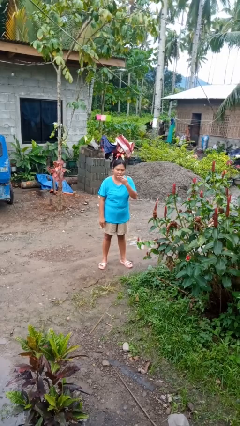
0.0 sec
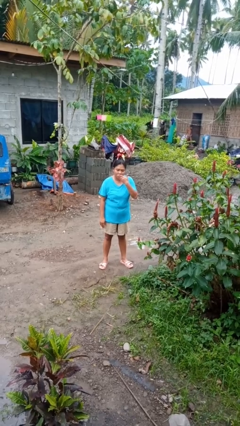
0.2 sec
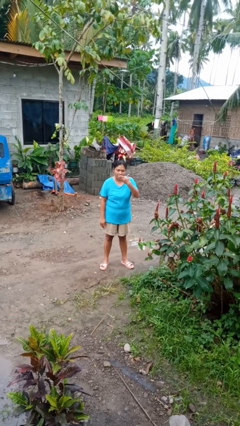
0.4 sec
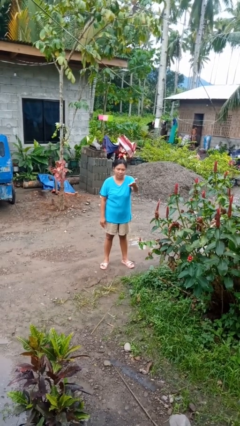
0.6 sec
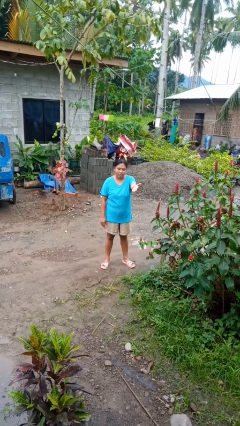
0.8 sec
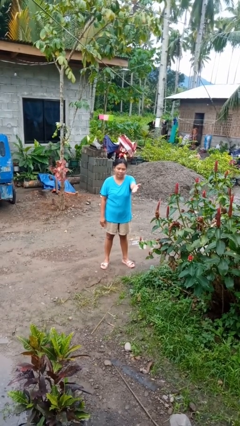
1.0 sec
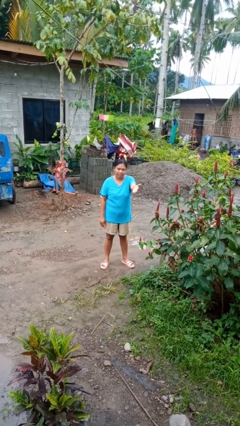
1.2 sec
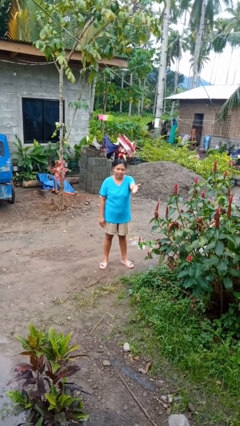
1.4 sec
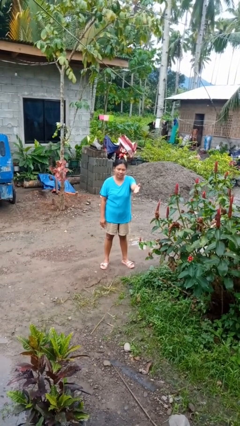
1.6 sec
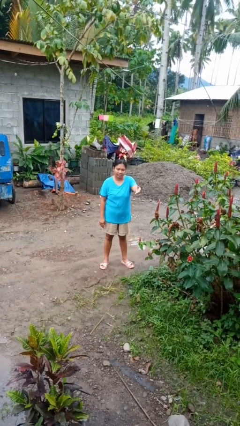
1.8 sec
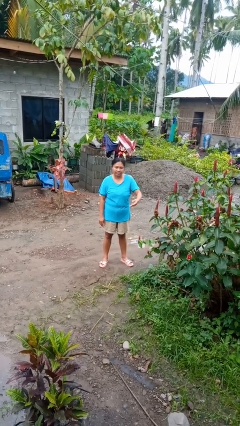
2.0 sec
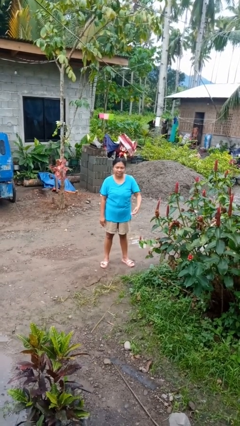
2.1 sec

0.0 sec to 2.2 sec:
person gestures blow kiss

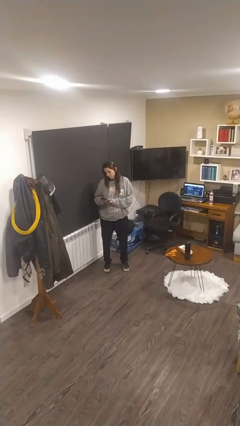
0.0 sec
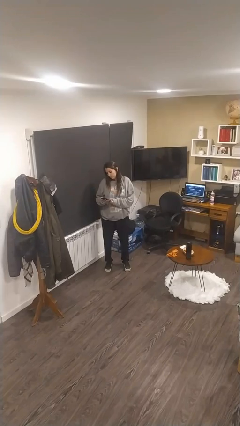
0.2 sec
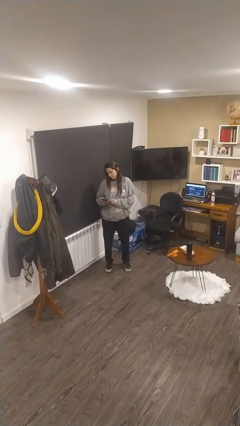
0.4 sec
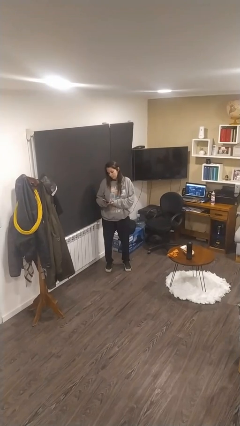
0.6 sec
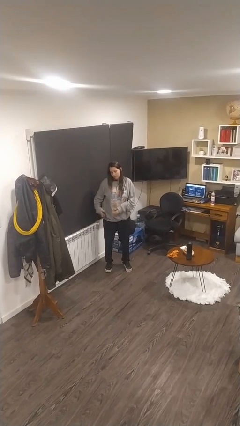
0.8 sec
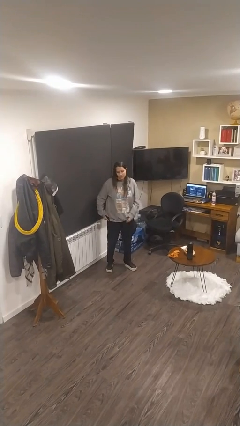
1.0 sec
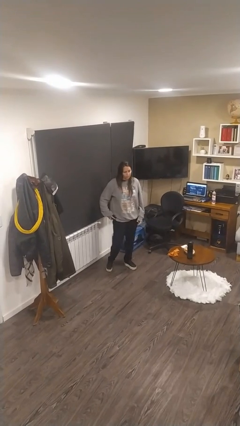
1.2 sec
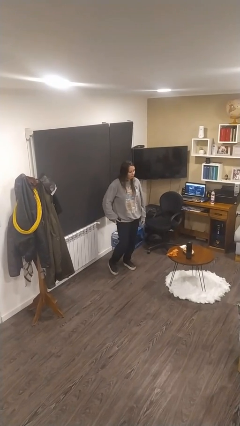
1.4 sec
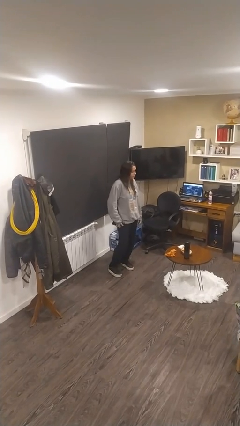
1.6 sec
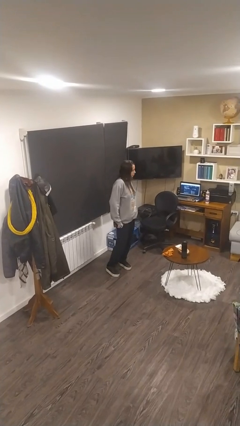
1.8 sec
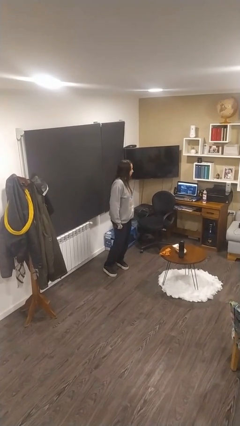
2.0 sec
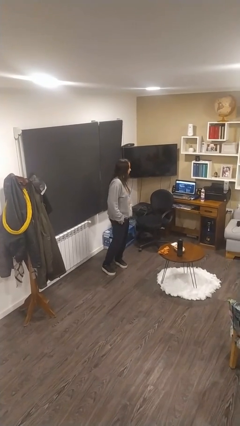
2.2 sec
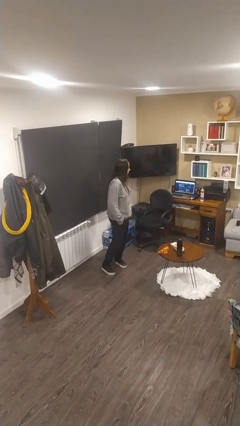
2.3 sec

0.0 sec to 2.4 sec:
person puts phone into pocket

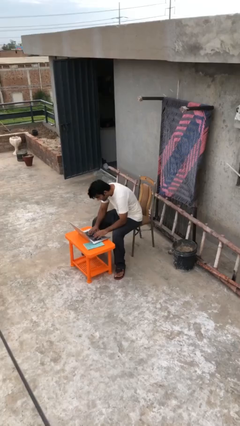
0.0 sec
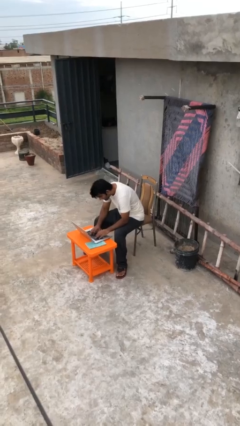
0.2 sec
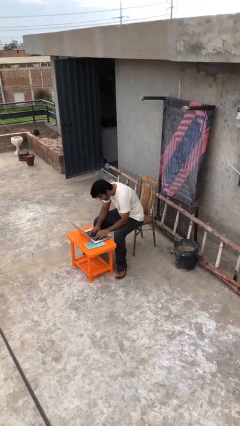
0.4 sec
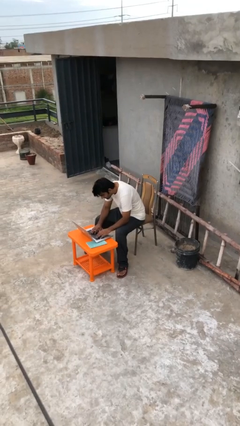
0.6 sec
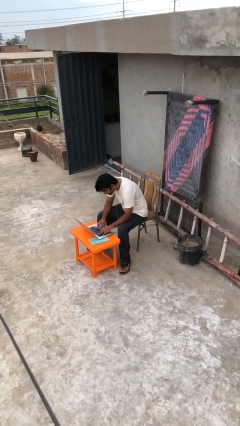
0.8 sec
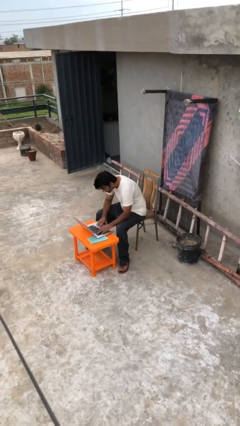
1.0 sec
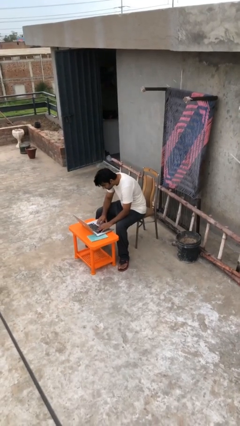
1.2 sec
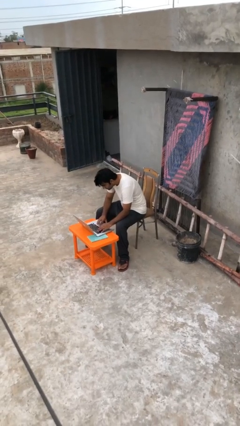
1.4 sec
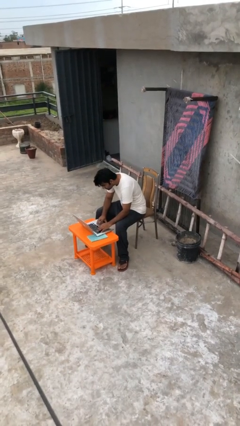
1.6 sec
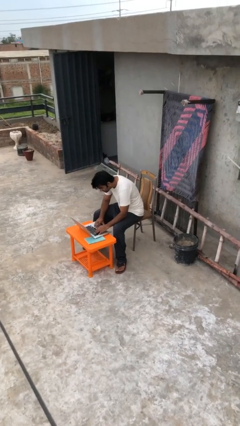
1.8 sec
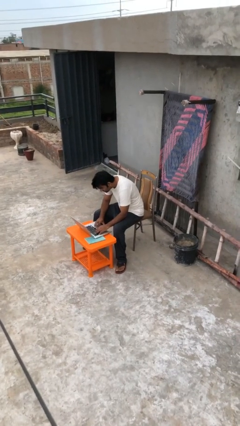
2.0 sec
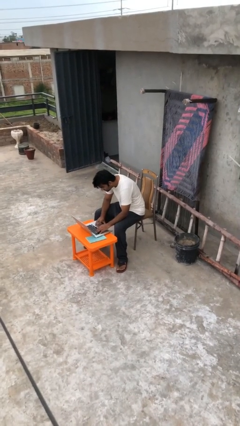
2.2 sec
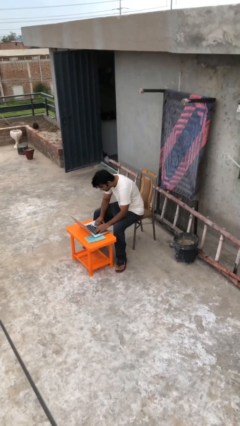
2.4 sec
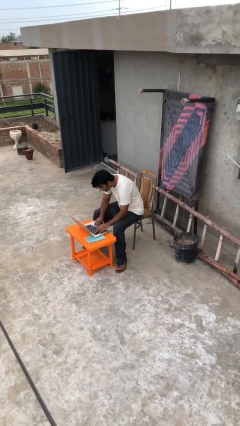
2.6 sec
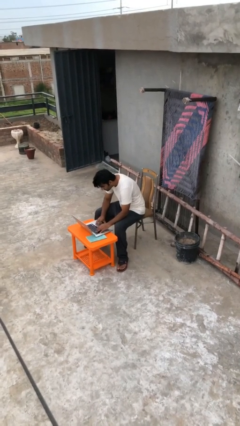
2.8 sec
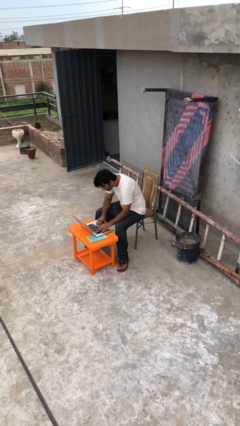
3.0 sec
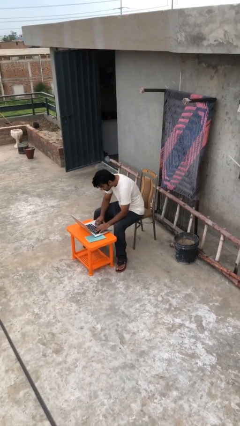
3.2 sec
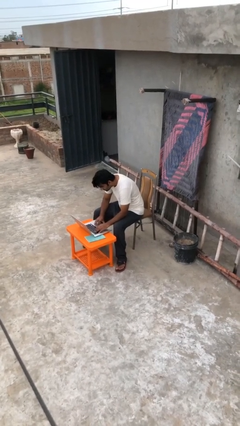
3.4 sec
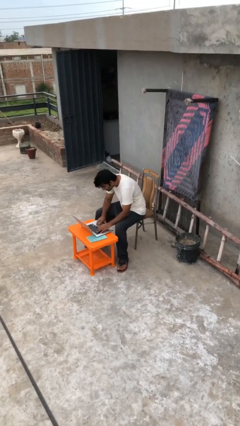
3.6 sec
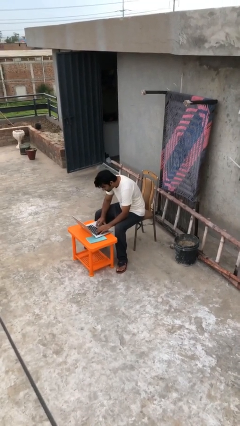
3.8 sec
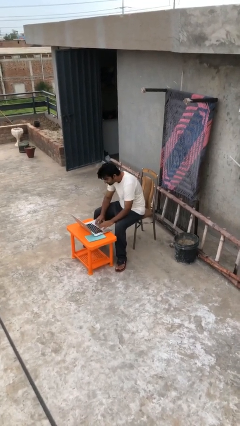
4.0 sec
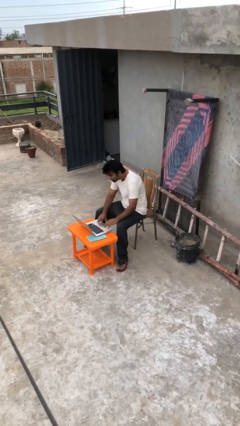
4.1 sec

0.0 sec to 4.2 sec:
person interacts with laptop

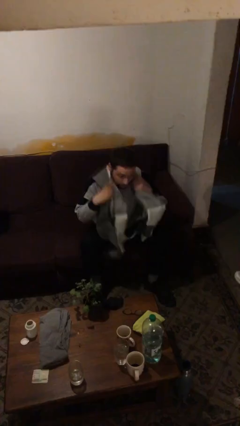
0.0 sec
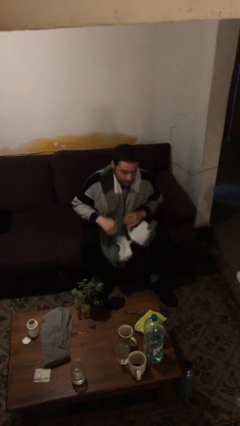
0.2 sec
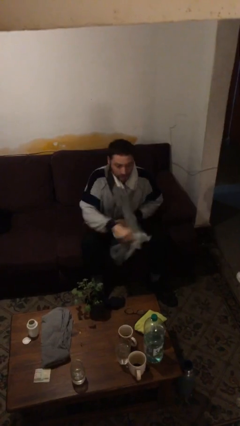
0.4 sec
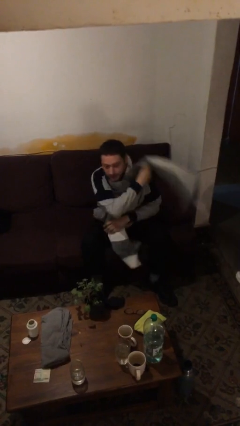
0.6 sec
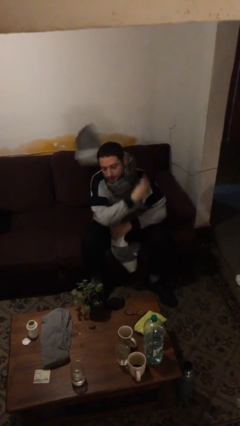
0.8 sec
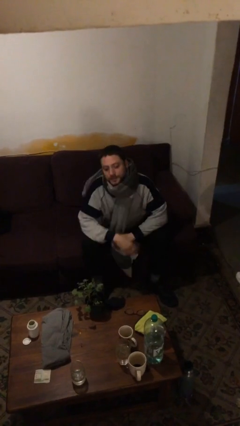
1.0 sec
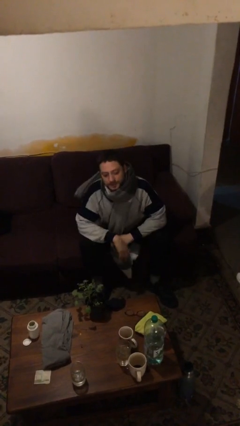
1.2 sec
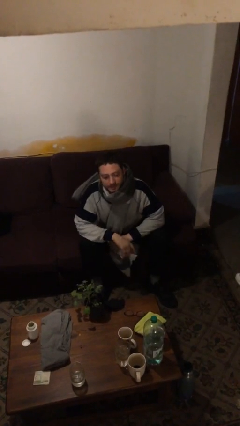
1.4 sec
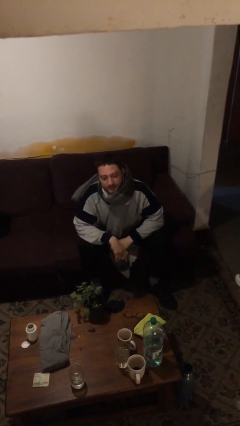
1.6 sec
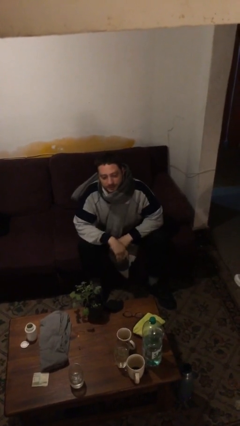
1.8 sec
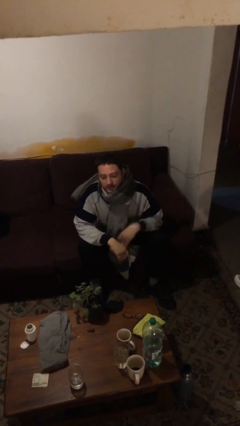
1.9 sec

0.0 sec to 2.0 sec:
person puts on scarf

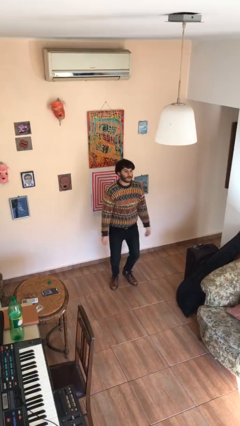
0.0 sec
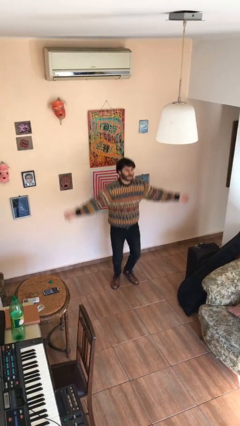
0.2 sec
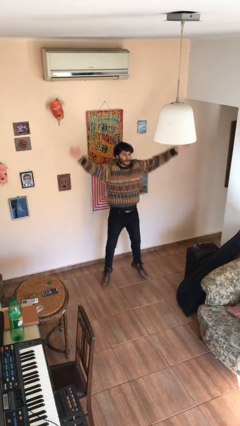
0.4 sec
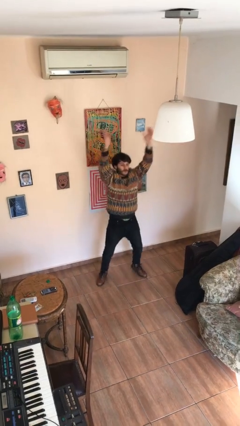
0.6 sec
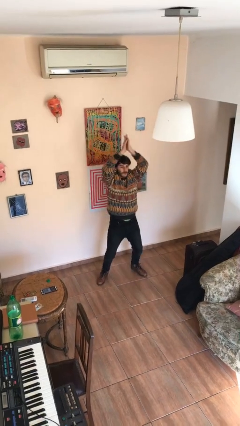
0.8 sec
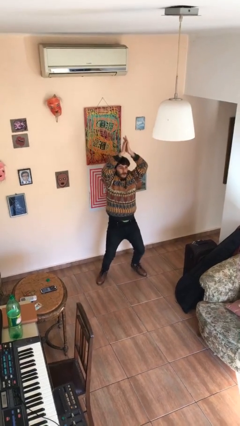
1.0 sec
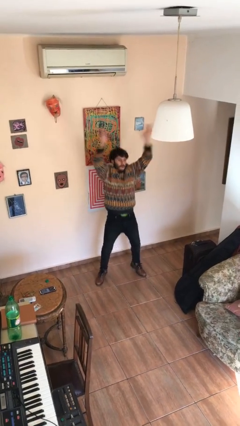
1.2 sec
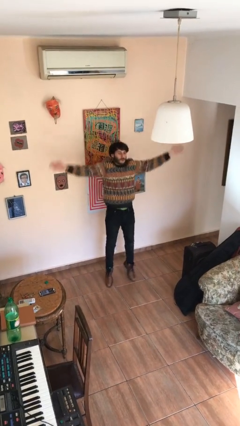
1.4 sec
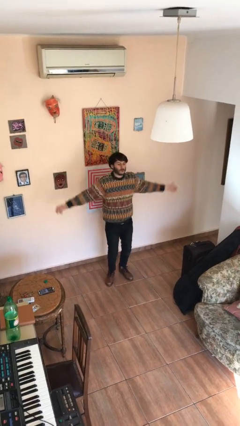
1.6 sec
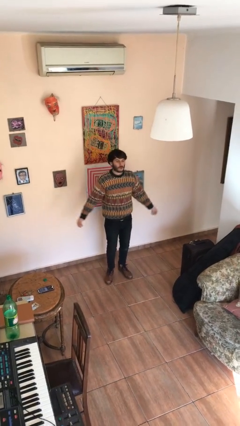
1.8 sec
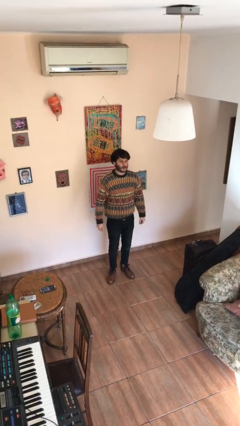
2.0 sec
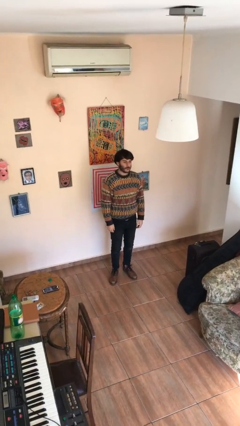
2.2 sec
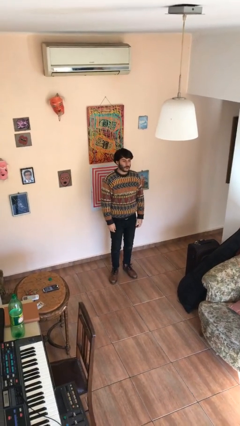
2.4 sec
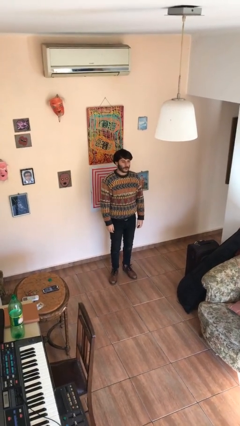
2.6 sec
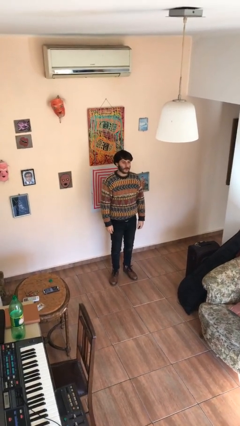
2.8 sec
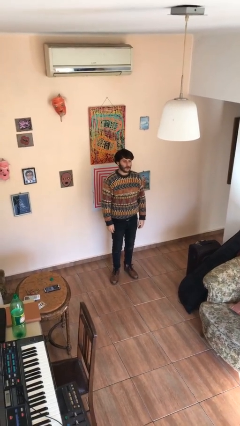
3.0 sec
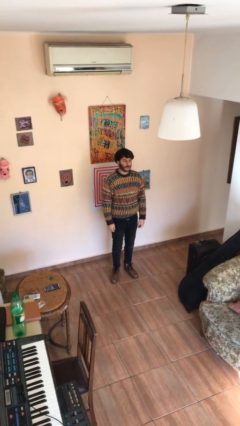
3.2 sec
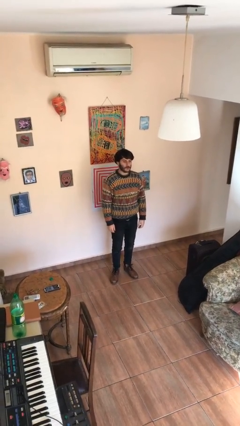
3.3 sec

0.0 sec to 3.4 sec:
person exercises with jumping jacks

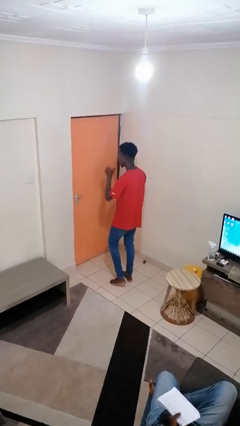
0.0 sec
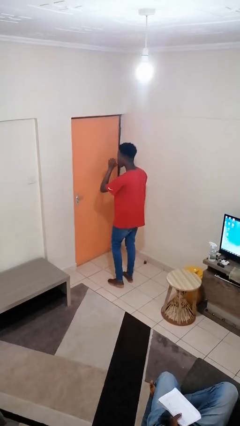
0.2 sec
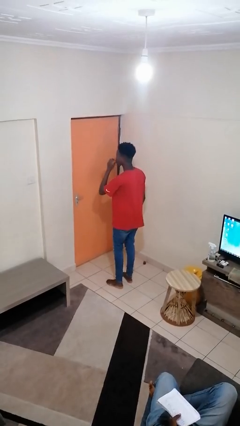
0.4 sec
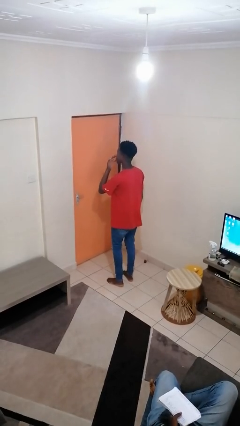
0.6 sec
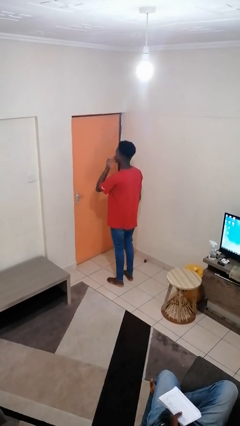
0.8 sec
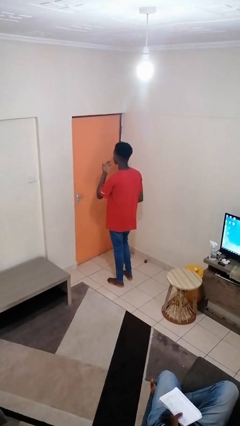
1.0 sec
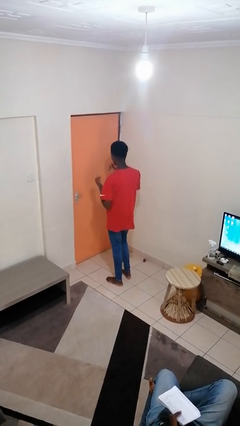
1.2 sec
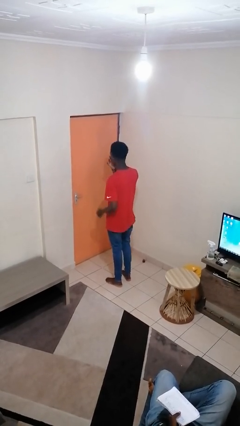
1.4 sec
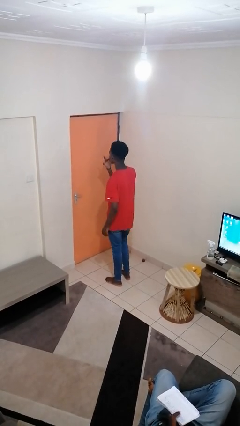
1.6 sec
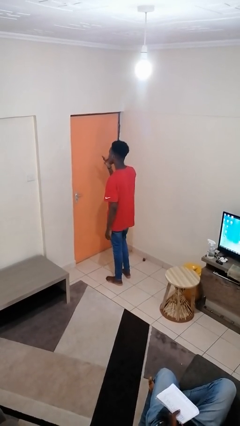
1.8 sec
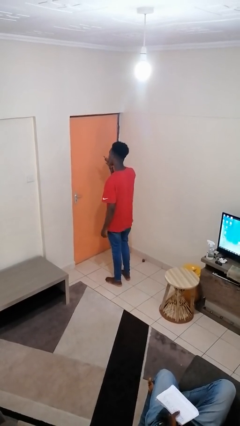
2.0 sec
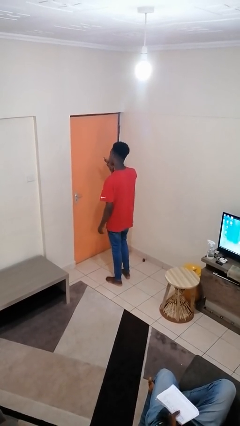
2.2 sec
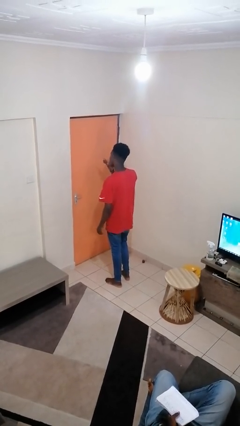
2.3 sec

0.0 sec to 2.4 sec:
person licks fingers

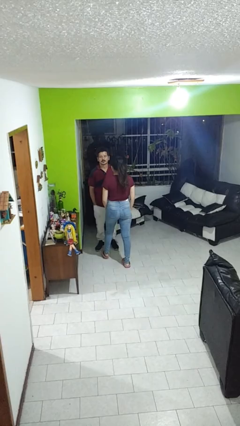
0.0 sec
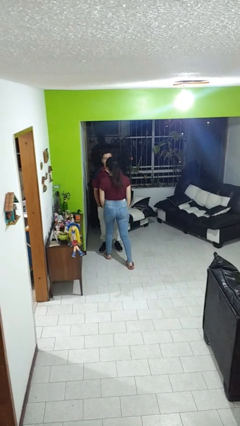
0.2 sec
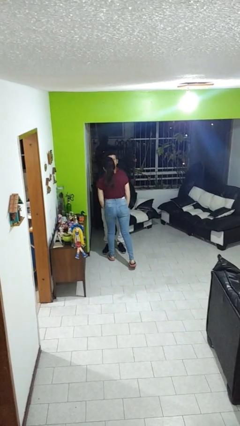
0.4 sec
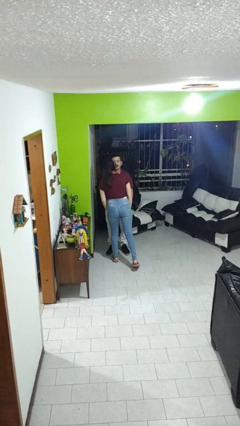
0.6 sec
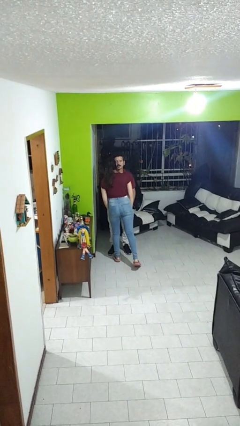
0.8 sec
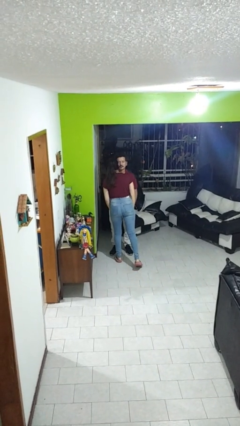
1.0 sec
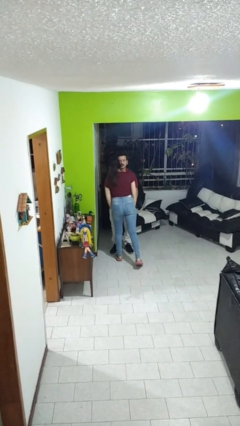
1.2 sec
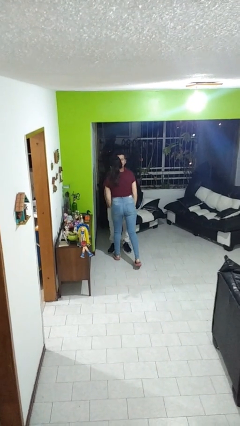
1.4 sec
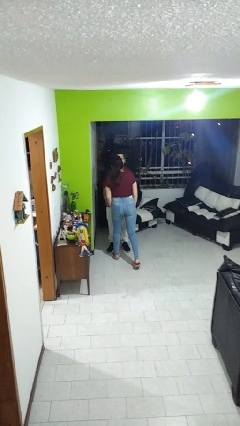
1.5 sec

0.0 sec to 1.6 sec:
person kisses cheek of person
